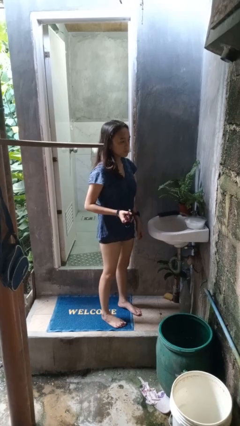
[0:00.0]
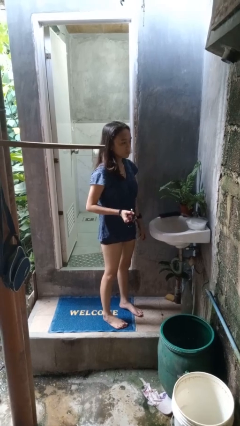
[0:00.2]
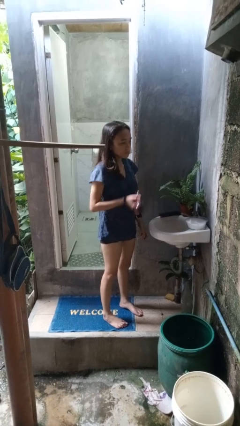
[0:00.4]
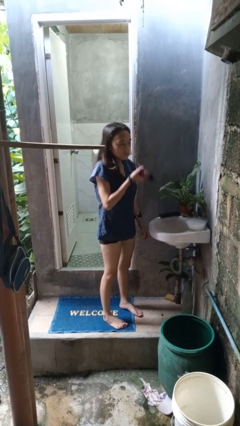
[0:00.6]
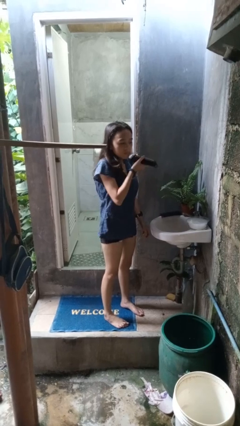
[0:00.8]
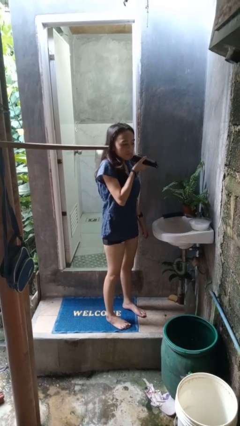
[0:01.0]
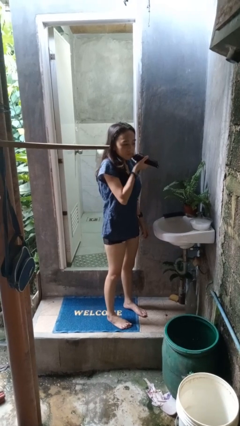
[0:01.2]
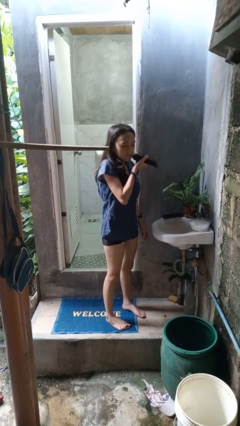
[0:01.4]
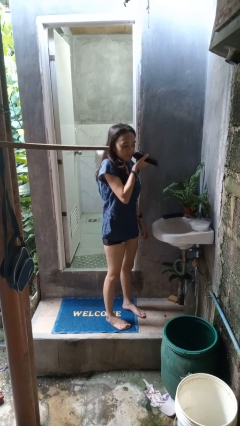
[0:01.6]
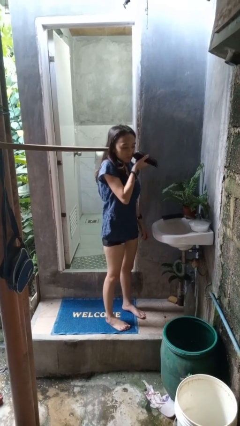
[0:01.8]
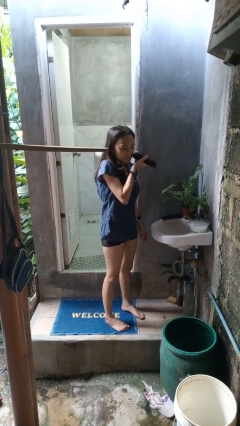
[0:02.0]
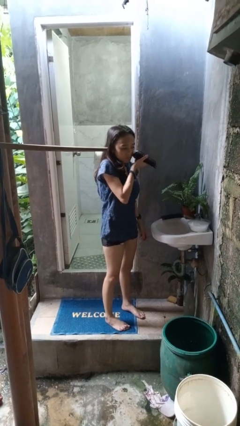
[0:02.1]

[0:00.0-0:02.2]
person shaves face

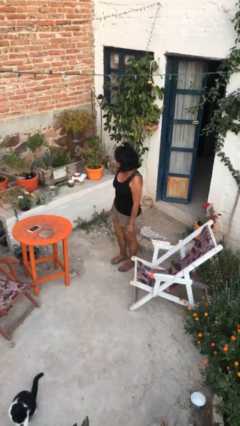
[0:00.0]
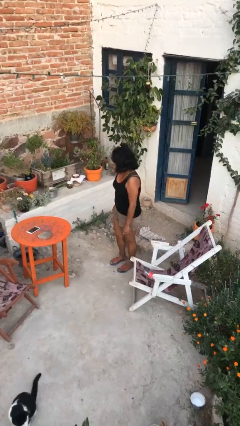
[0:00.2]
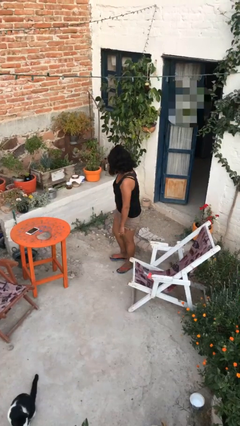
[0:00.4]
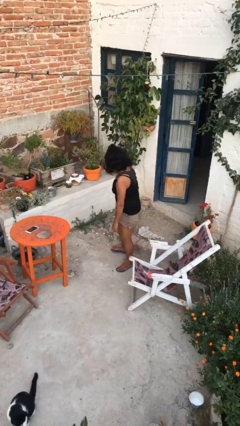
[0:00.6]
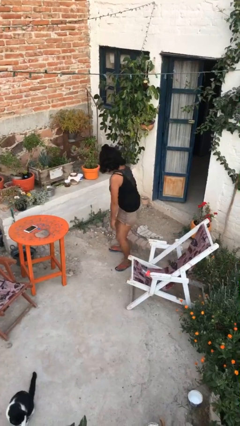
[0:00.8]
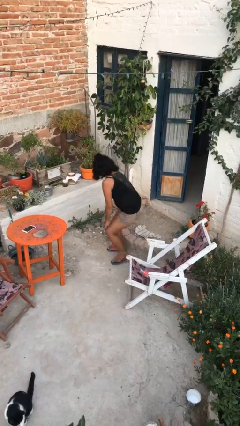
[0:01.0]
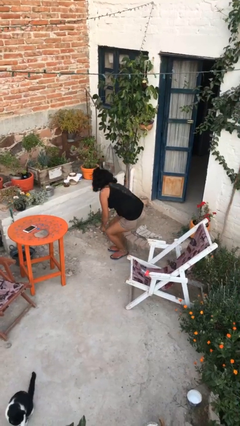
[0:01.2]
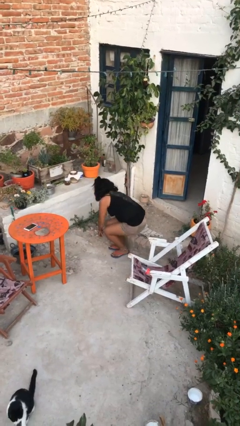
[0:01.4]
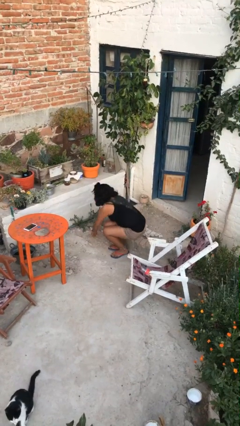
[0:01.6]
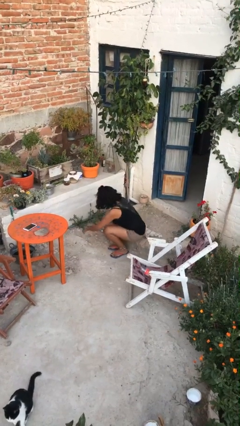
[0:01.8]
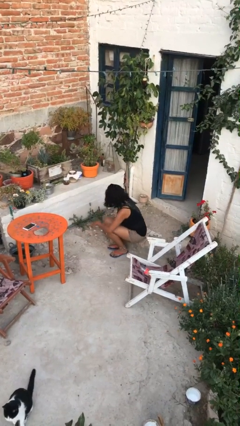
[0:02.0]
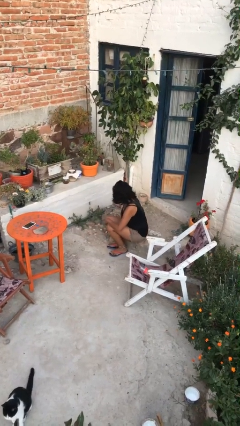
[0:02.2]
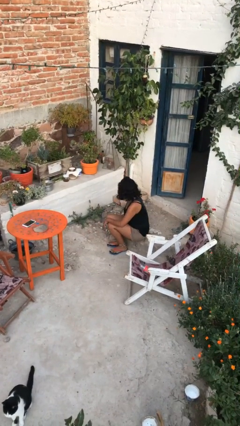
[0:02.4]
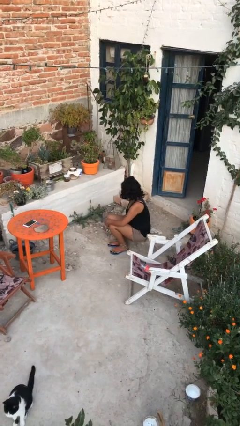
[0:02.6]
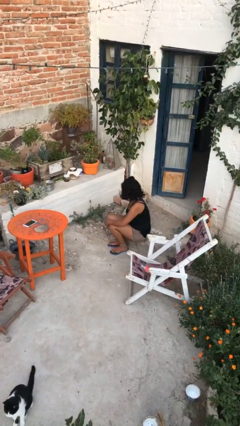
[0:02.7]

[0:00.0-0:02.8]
person sits down

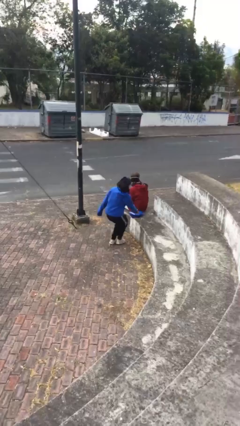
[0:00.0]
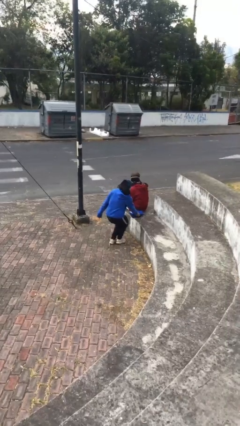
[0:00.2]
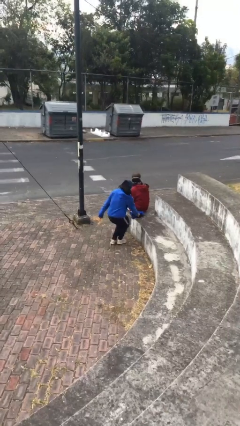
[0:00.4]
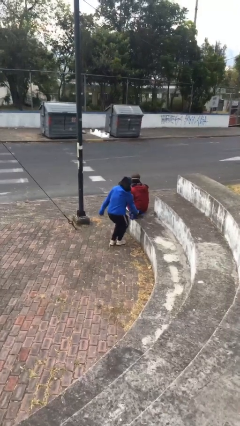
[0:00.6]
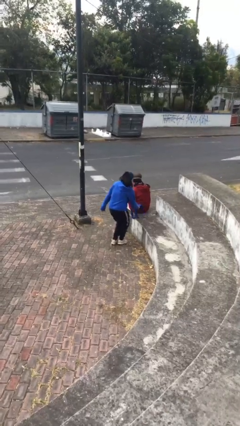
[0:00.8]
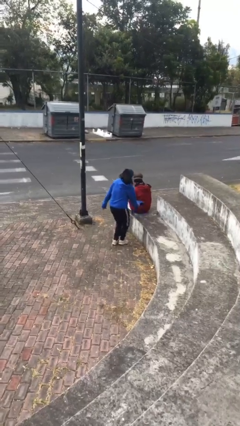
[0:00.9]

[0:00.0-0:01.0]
person steals object from person

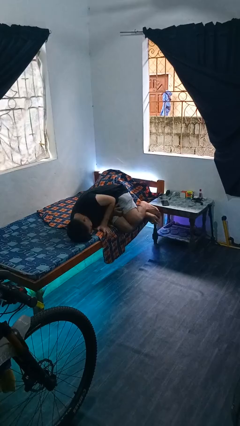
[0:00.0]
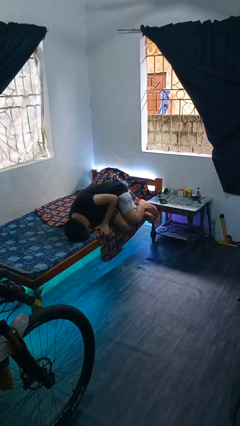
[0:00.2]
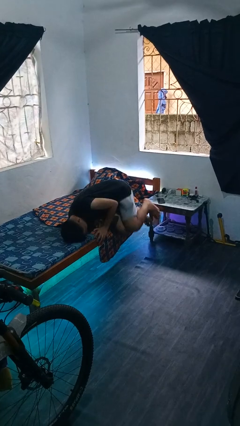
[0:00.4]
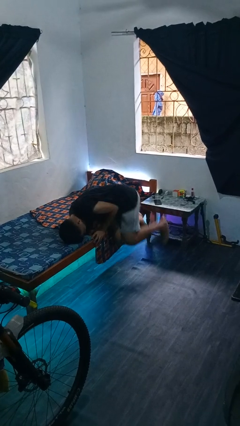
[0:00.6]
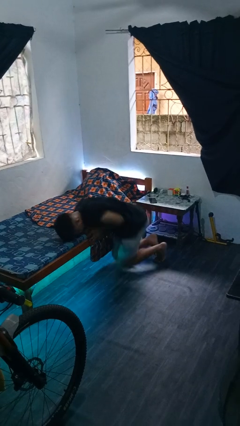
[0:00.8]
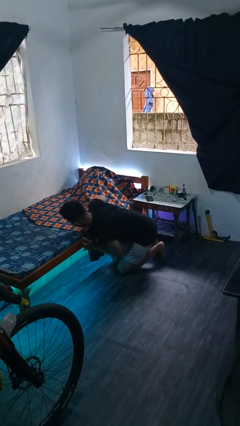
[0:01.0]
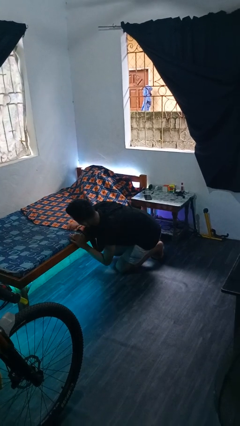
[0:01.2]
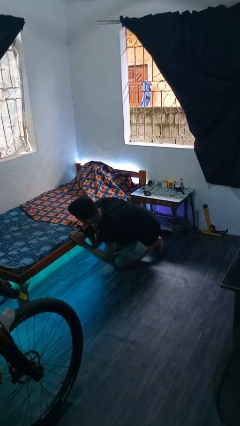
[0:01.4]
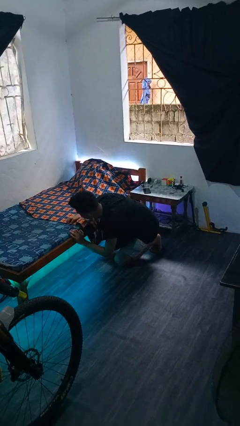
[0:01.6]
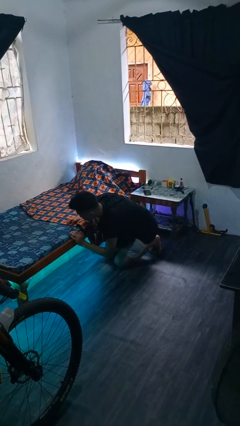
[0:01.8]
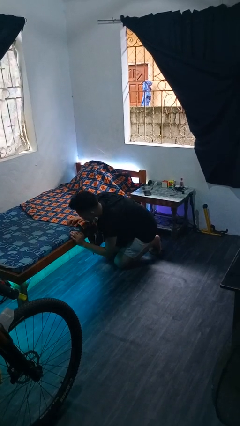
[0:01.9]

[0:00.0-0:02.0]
person falls from bed

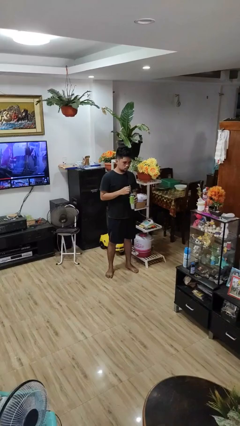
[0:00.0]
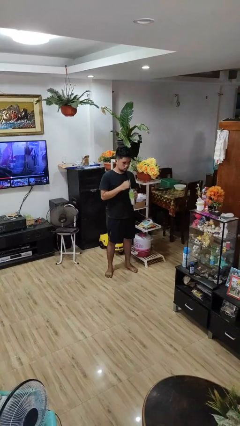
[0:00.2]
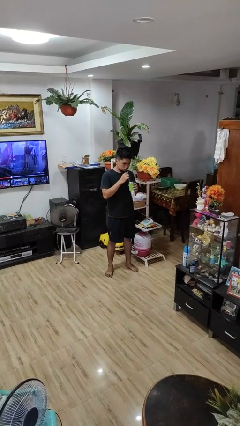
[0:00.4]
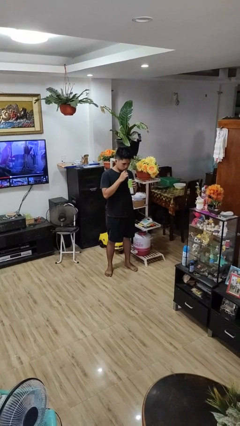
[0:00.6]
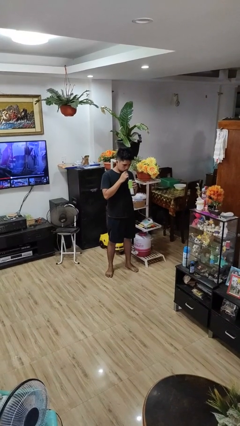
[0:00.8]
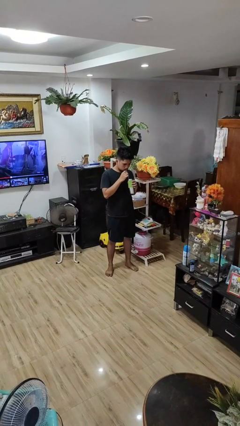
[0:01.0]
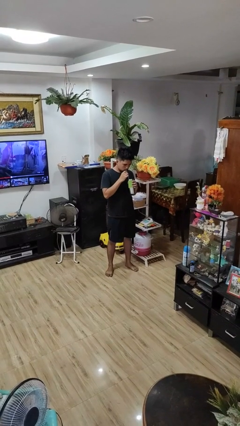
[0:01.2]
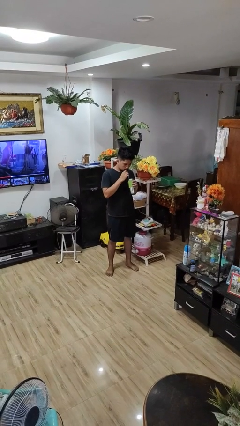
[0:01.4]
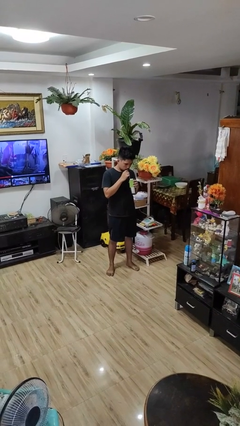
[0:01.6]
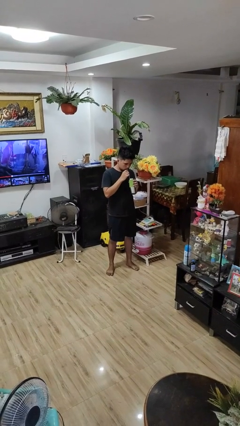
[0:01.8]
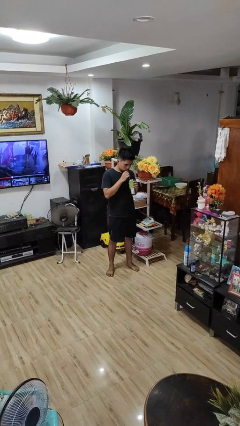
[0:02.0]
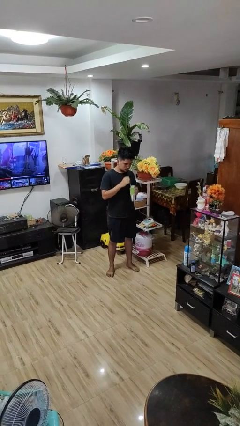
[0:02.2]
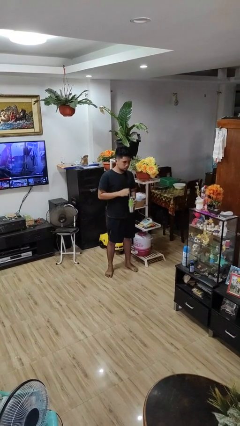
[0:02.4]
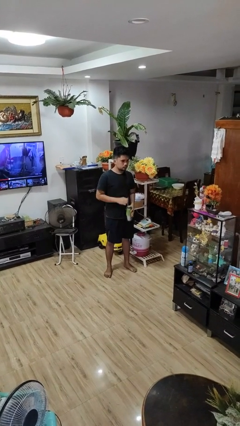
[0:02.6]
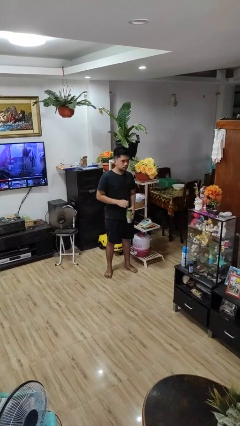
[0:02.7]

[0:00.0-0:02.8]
person drinks from straw

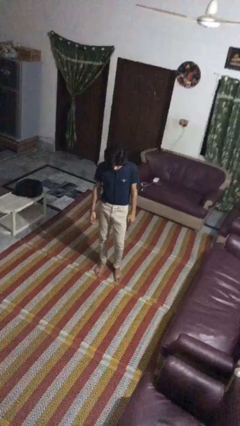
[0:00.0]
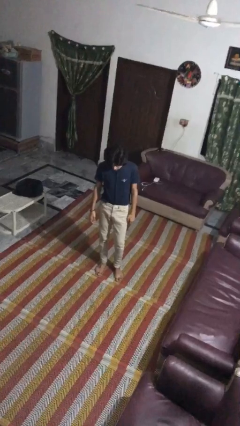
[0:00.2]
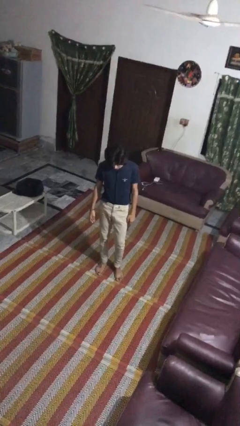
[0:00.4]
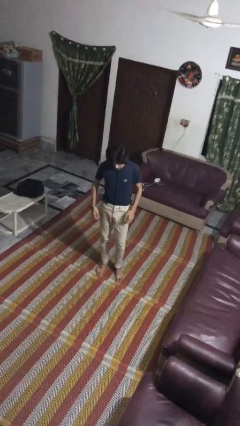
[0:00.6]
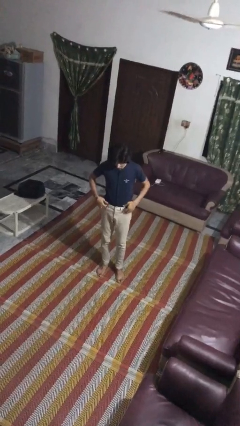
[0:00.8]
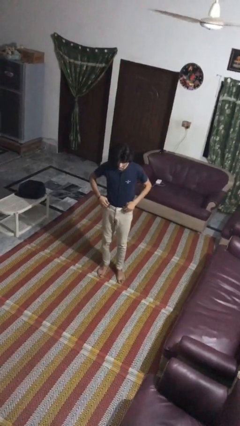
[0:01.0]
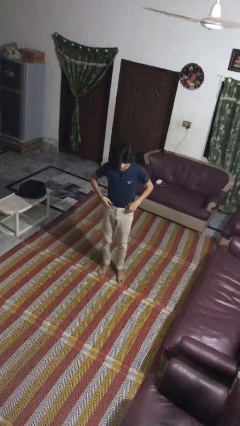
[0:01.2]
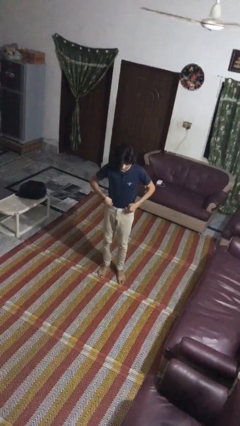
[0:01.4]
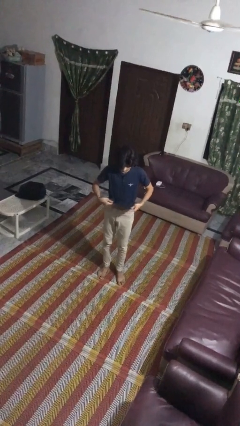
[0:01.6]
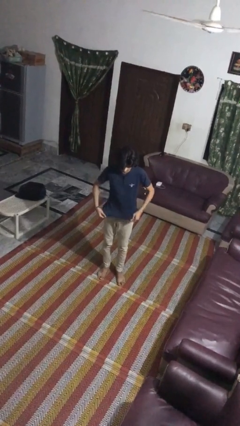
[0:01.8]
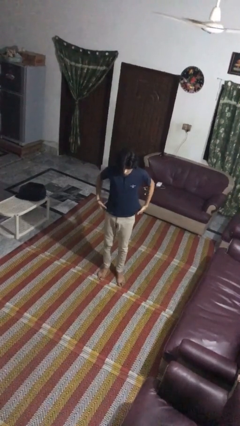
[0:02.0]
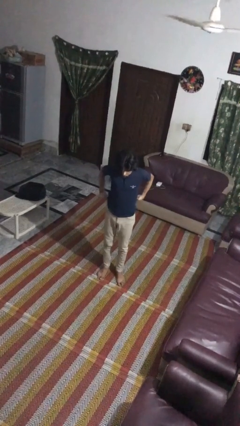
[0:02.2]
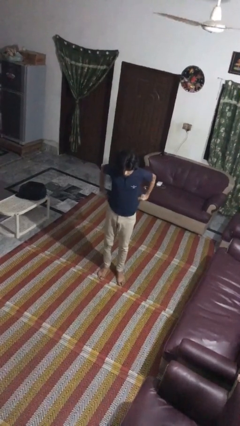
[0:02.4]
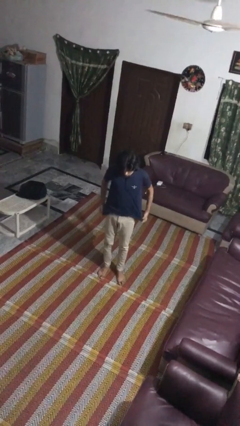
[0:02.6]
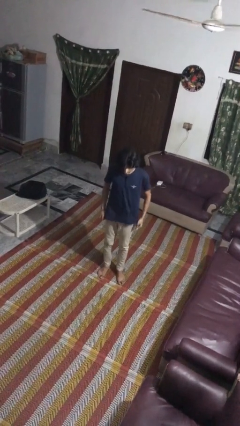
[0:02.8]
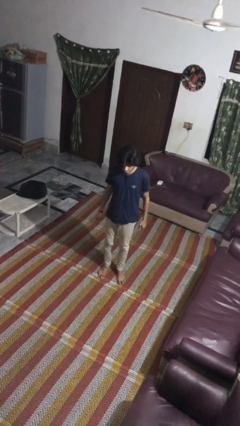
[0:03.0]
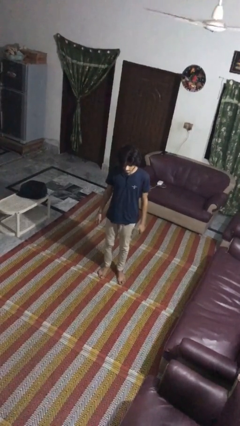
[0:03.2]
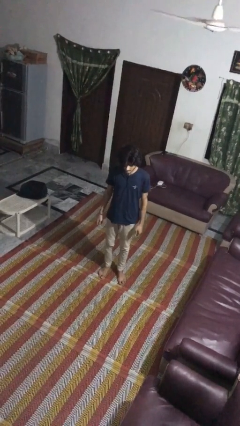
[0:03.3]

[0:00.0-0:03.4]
person untucks shirt

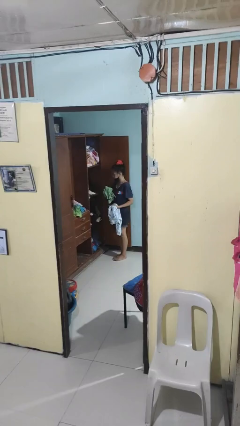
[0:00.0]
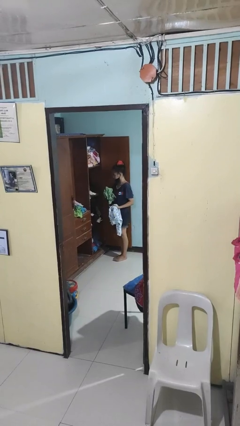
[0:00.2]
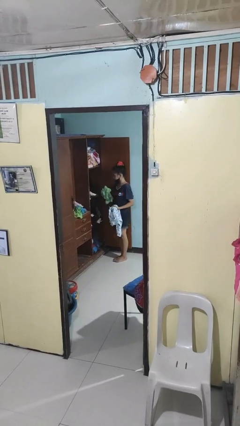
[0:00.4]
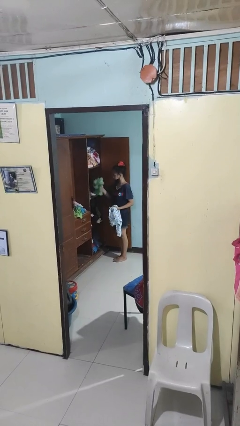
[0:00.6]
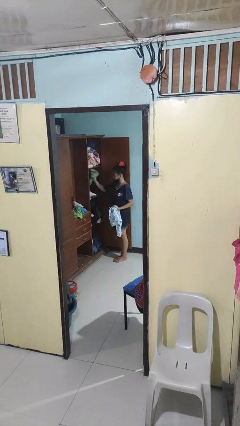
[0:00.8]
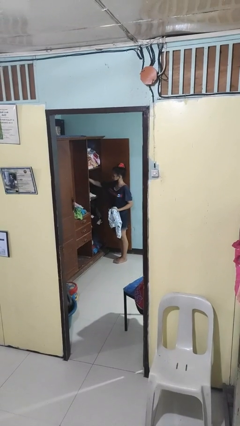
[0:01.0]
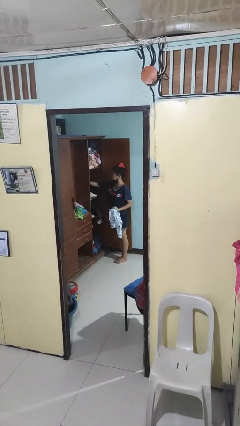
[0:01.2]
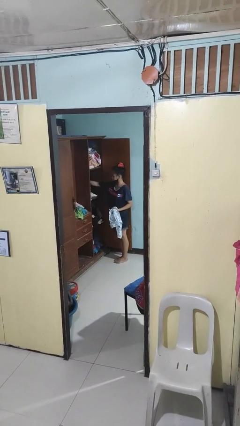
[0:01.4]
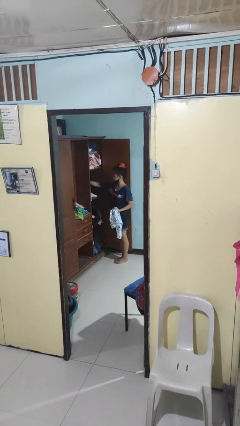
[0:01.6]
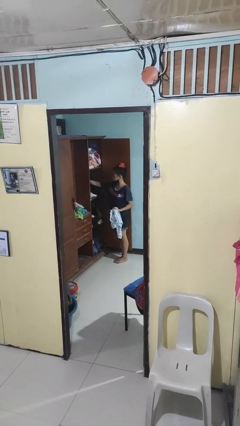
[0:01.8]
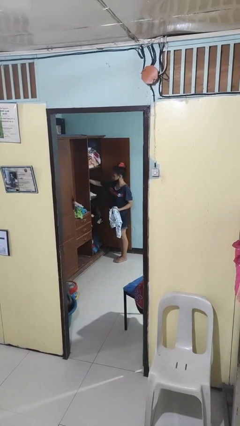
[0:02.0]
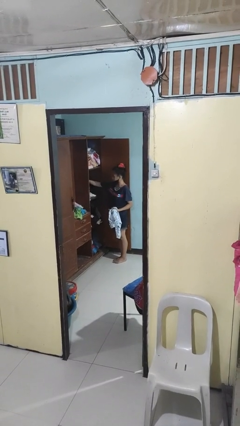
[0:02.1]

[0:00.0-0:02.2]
person puts clothes into dresser

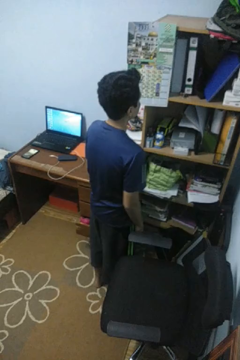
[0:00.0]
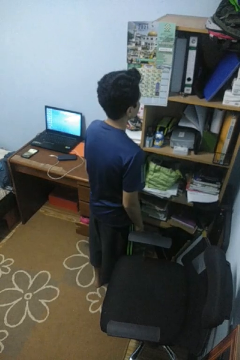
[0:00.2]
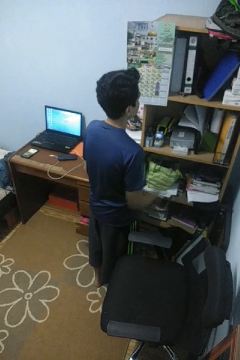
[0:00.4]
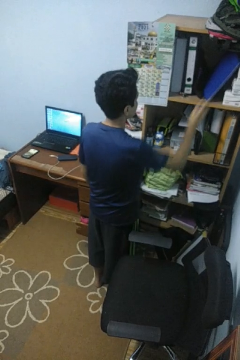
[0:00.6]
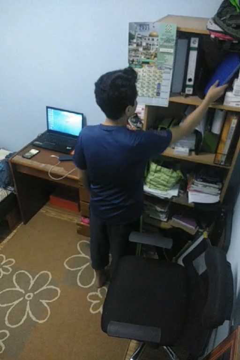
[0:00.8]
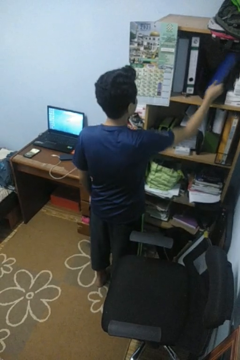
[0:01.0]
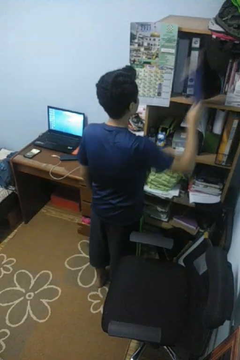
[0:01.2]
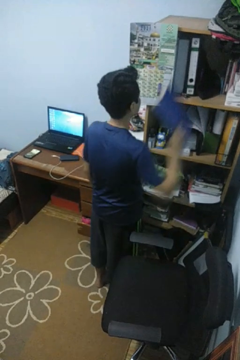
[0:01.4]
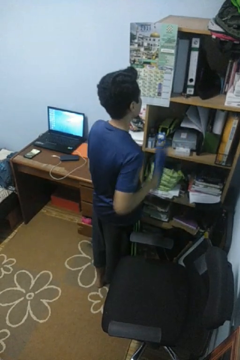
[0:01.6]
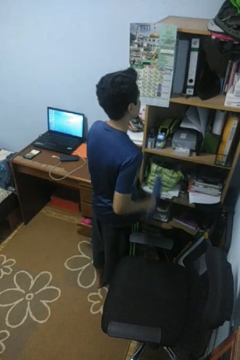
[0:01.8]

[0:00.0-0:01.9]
person picks up object from cabinet
